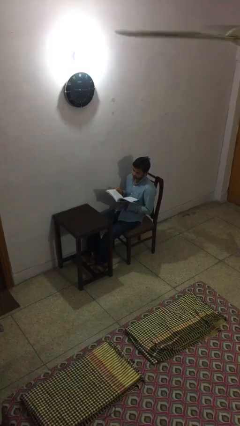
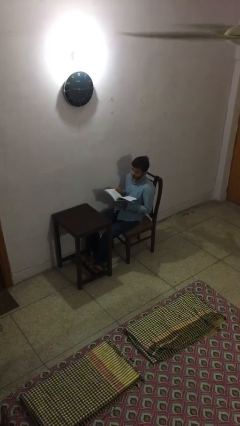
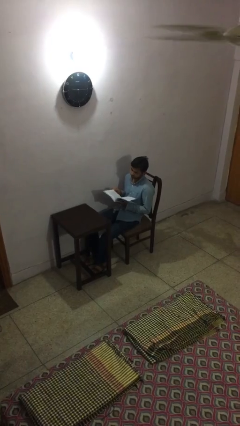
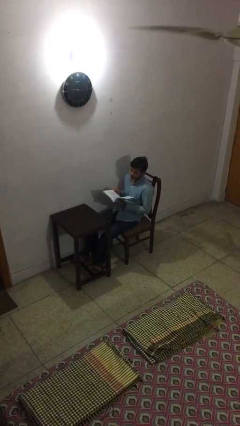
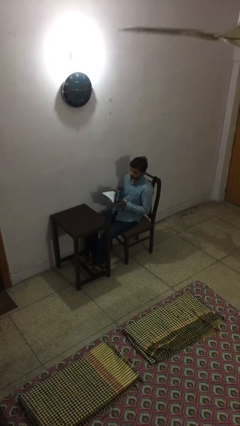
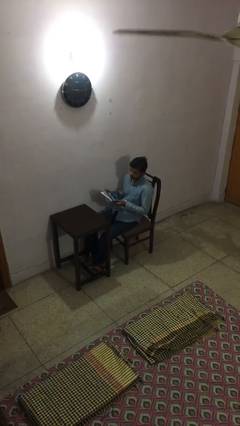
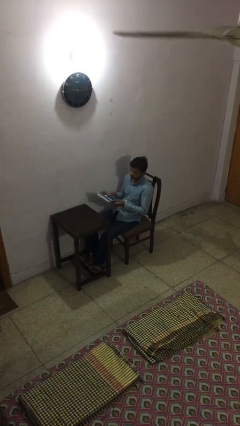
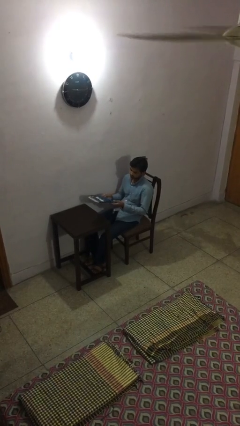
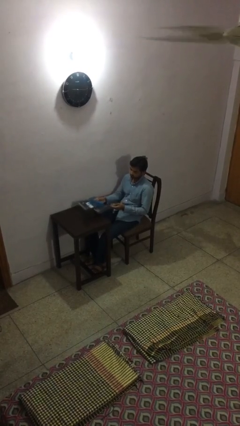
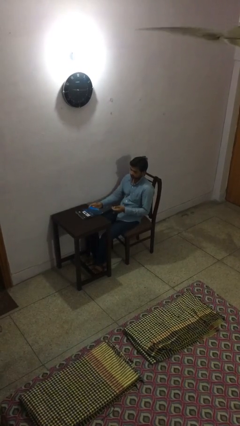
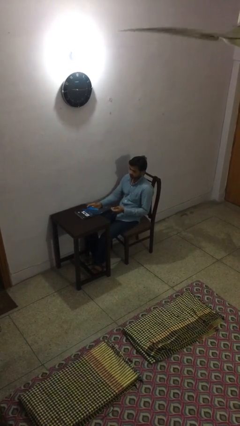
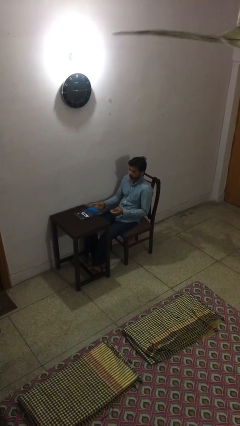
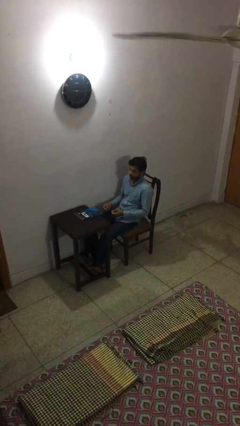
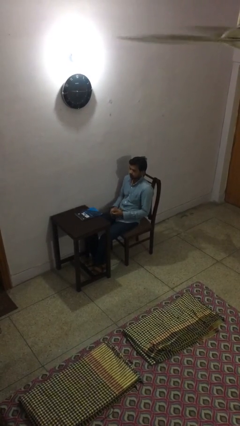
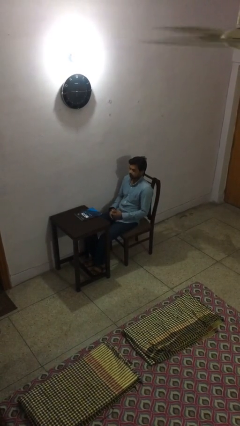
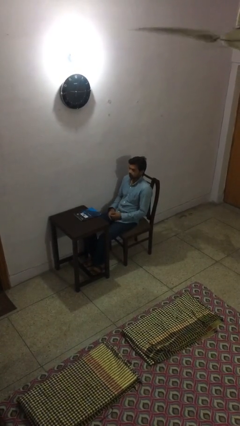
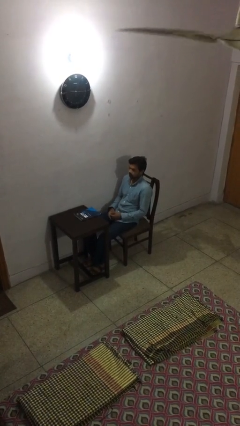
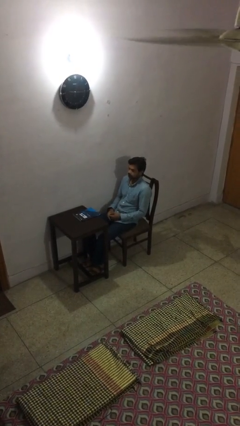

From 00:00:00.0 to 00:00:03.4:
person puts down object on table

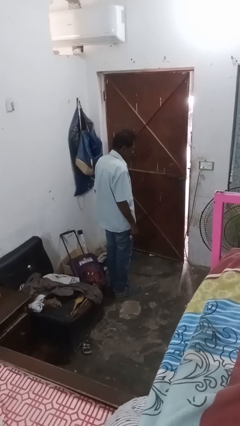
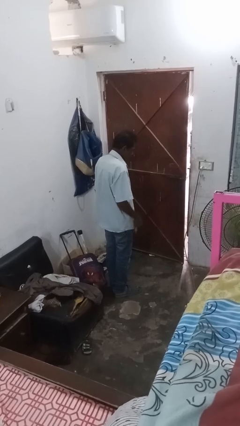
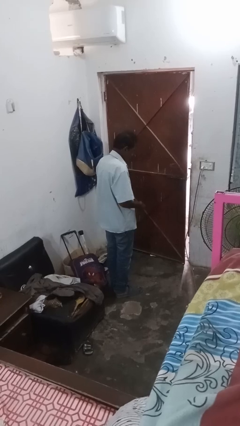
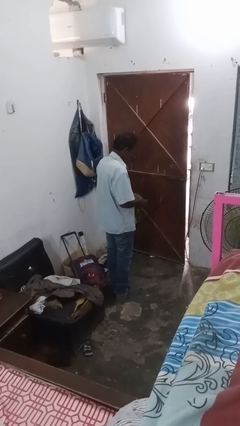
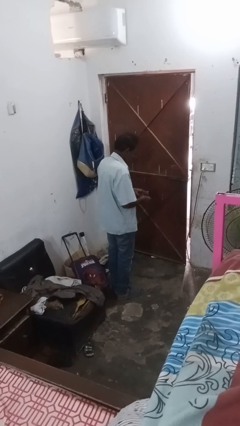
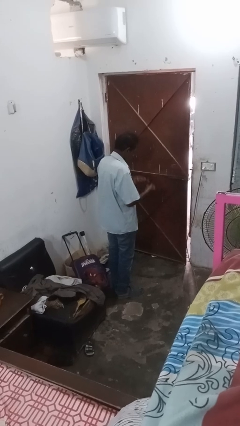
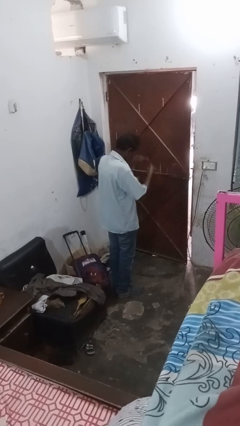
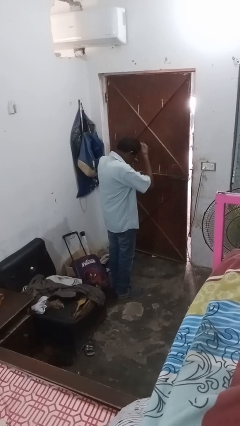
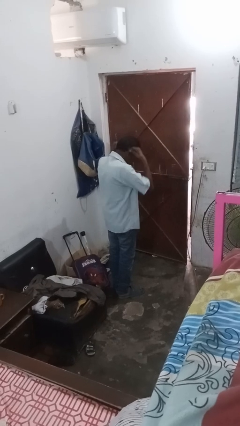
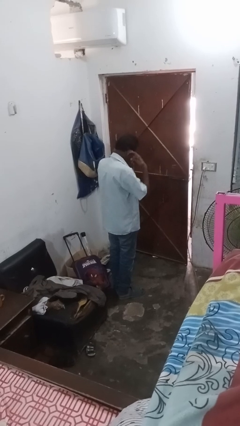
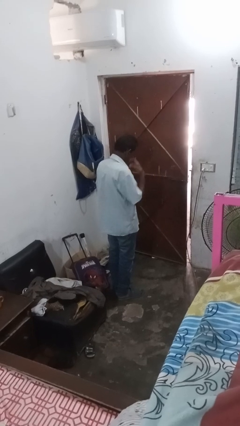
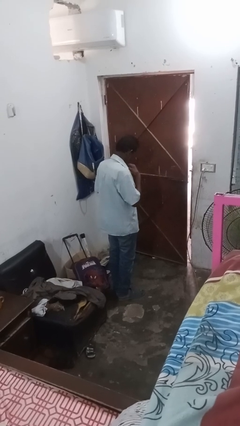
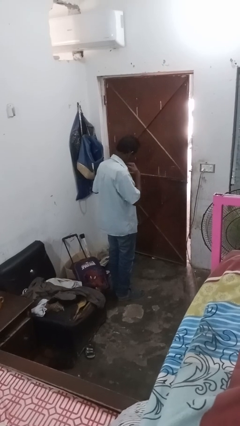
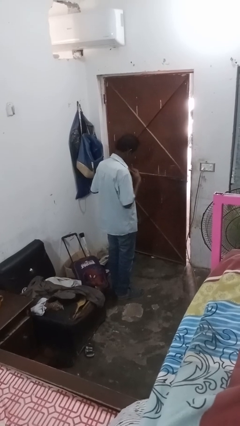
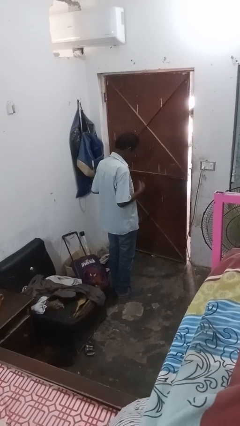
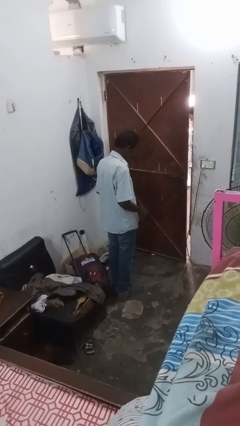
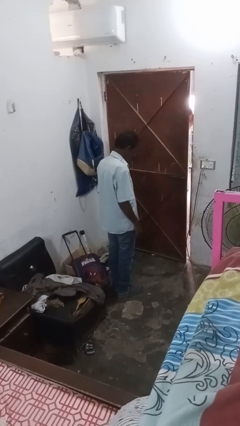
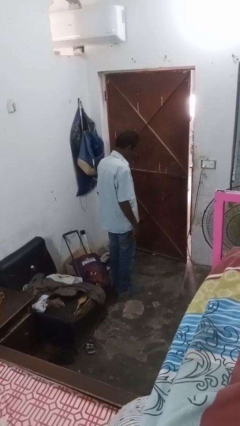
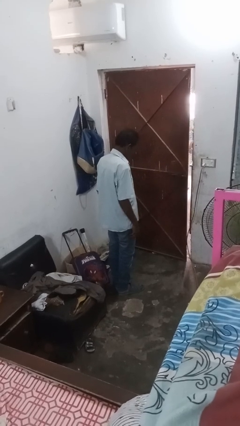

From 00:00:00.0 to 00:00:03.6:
person puts on necklace

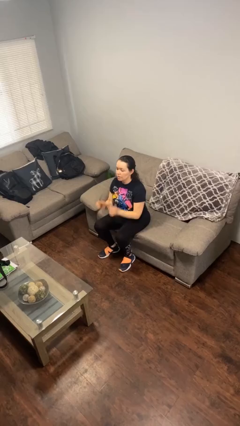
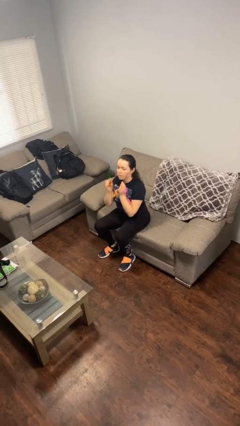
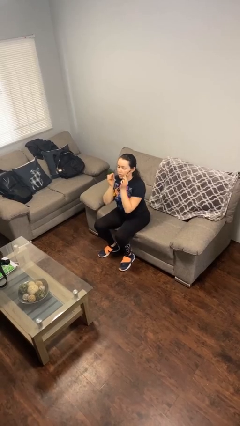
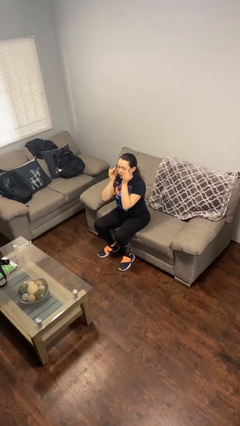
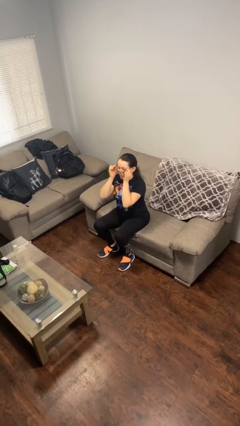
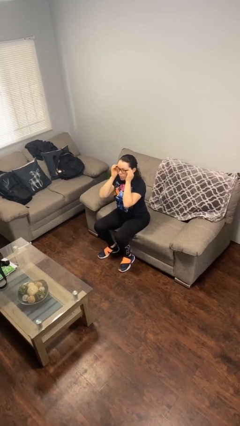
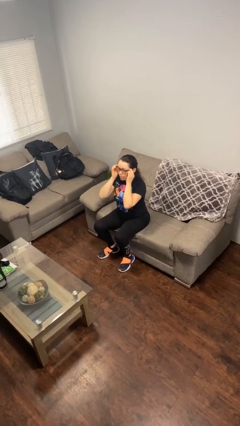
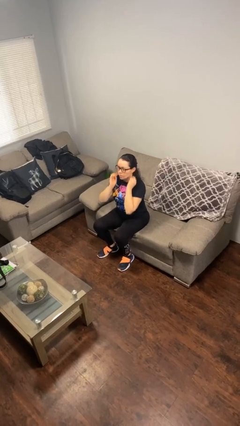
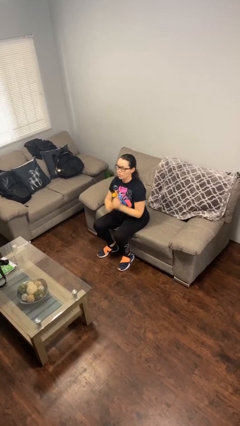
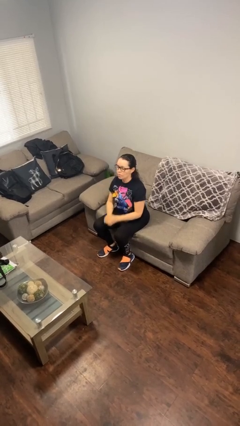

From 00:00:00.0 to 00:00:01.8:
person puts on glasses

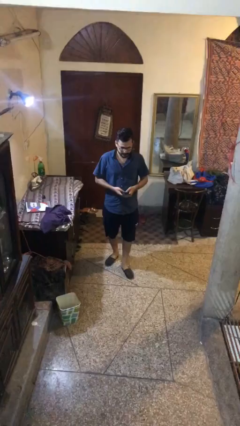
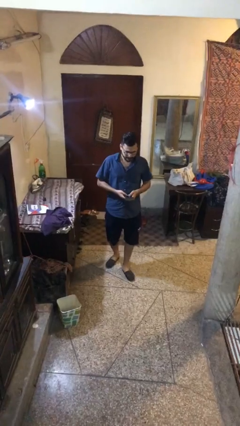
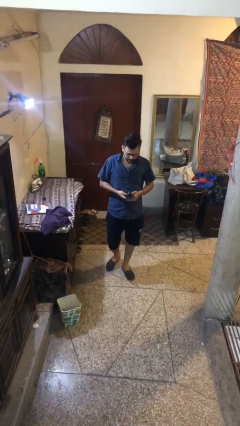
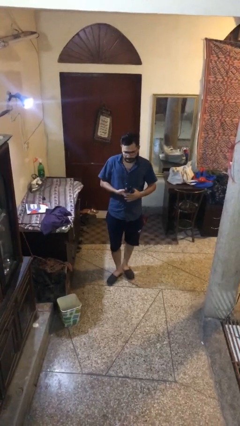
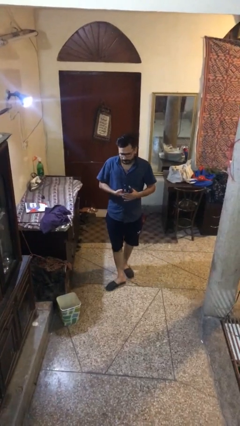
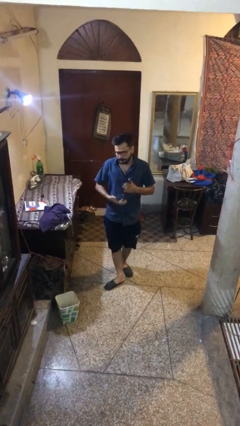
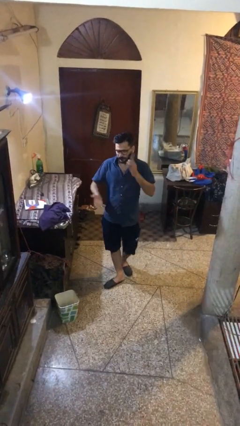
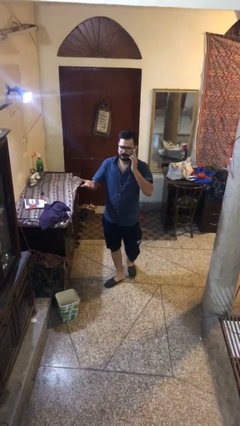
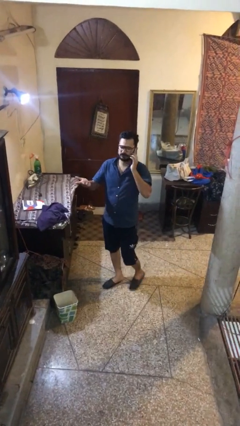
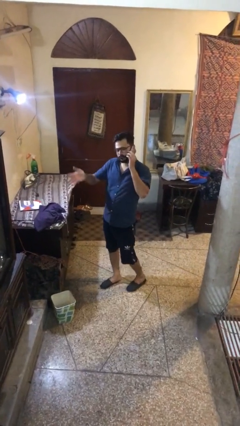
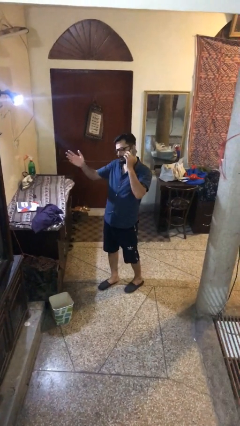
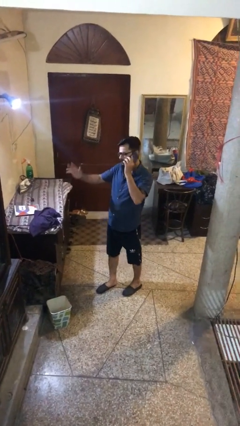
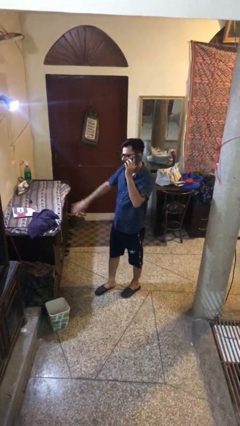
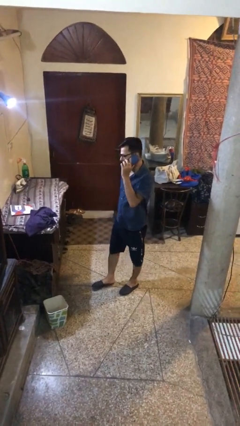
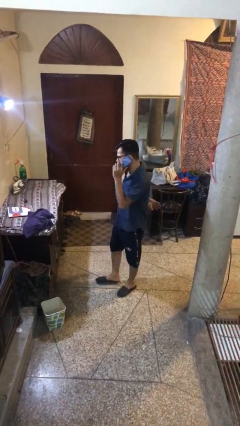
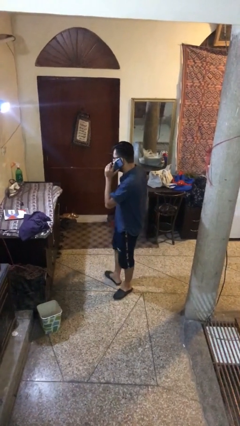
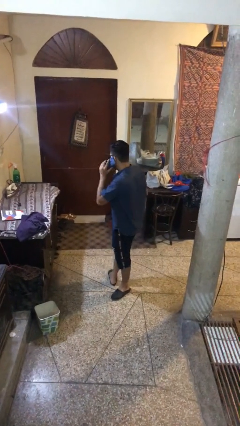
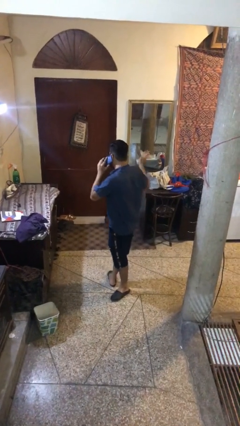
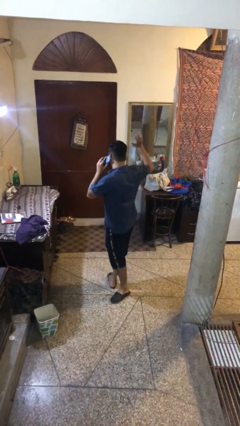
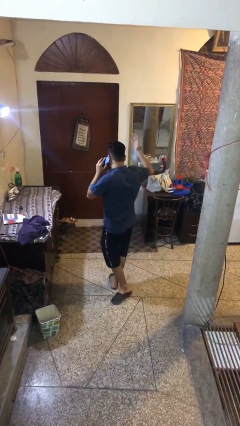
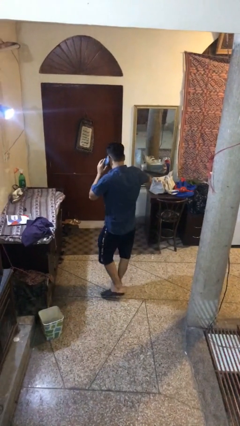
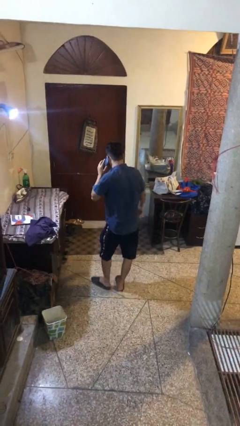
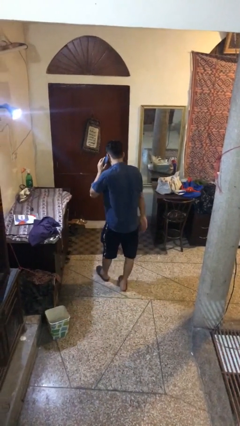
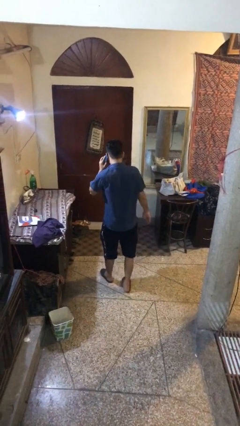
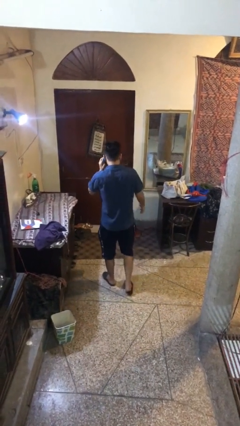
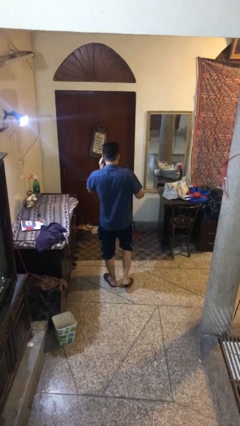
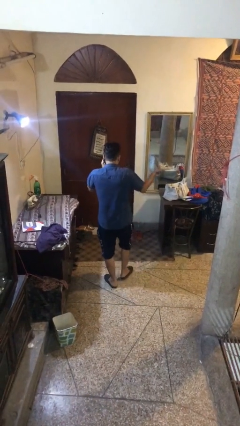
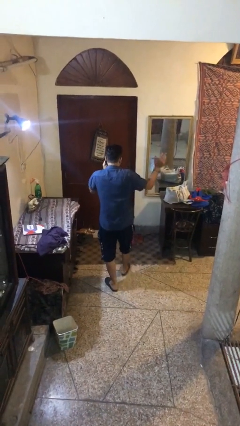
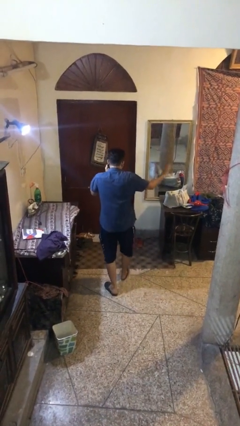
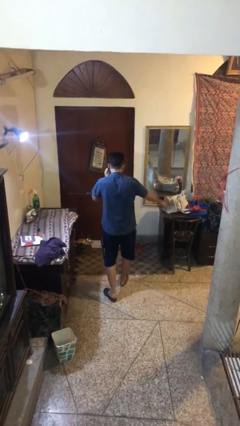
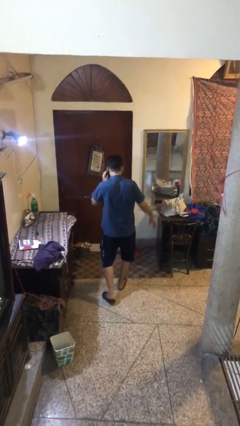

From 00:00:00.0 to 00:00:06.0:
person talks on phone

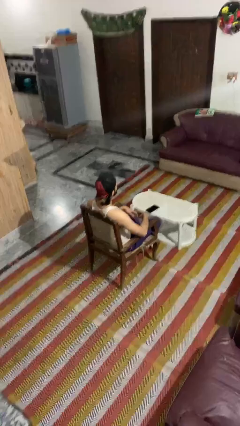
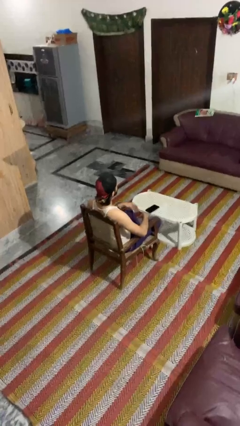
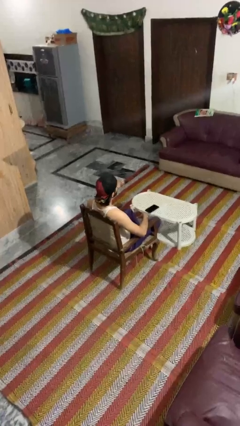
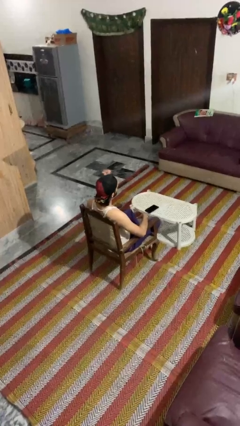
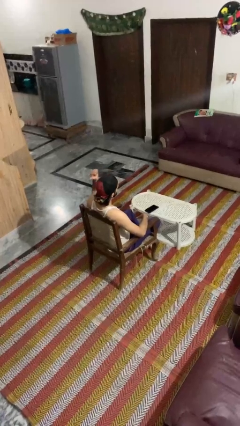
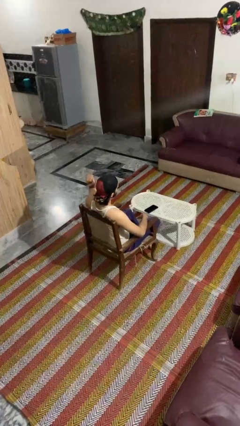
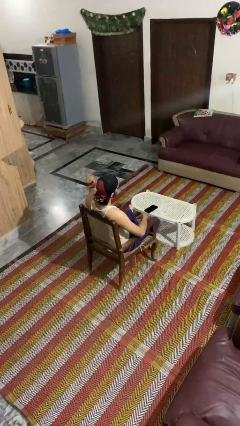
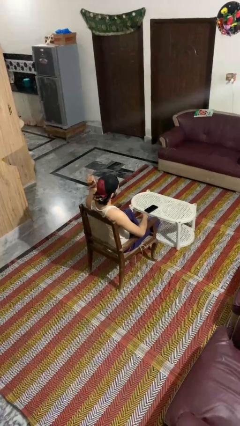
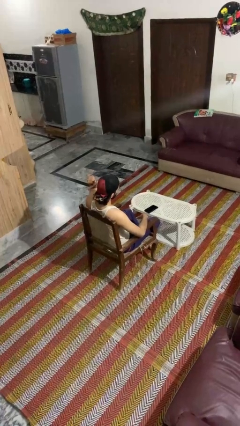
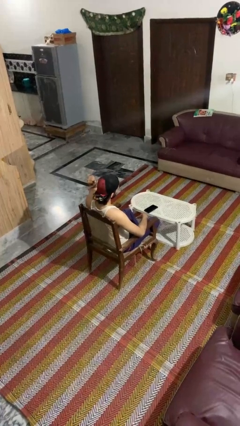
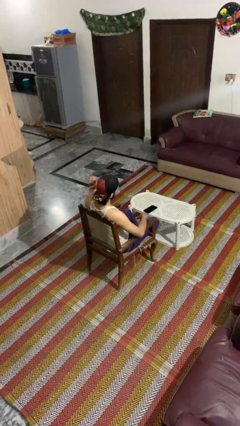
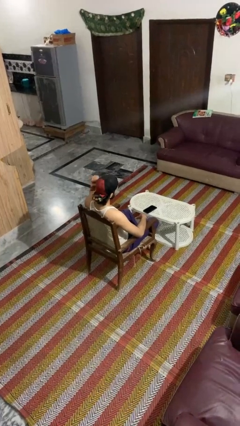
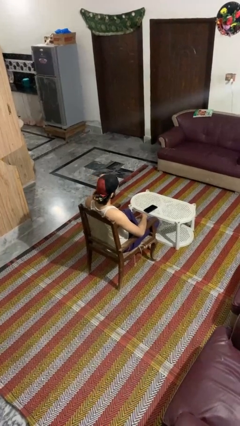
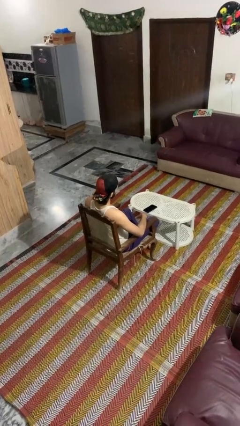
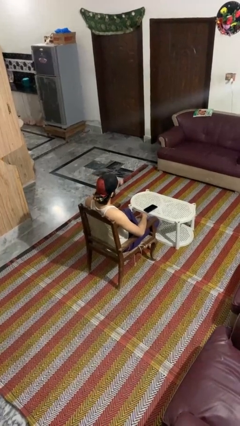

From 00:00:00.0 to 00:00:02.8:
person gestures behind me

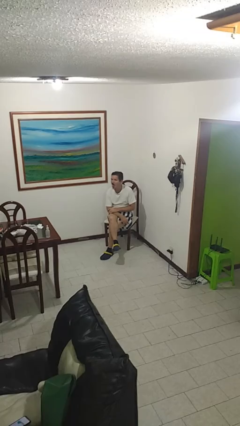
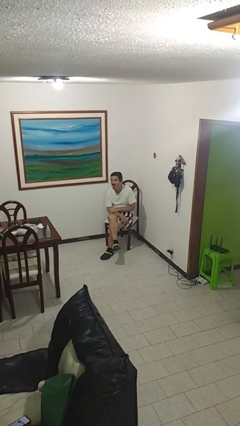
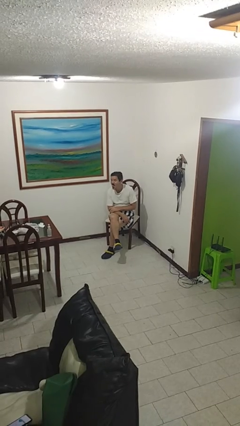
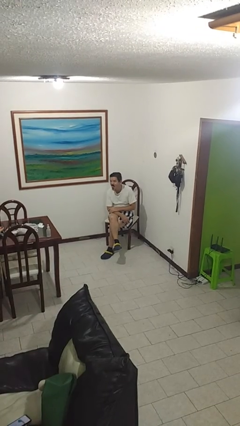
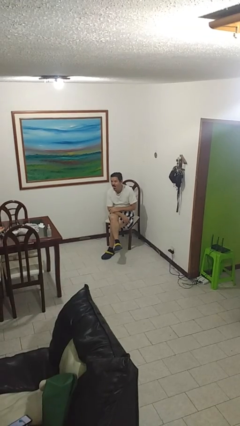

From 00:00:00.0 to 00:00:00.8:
person sticks out tongue
